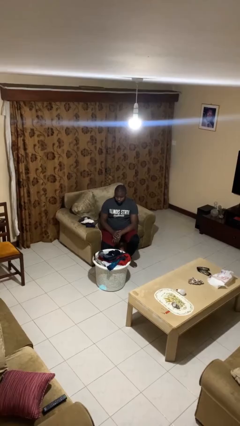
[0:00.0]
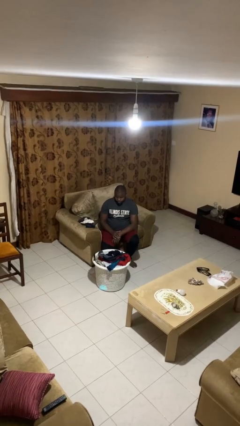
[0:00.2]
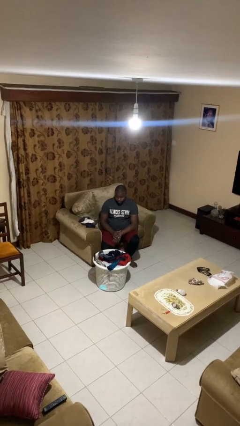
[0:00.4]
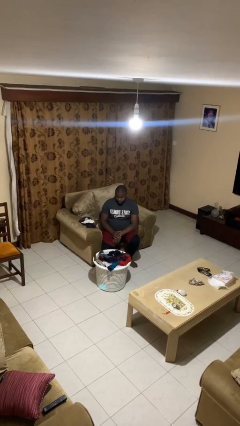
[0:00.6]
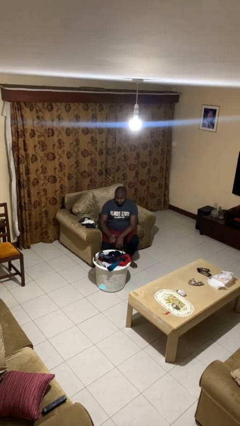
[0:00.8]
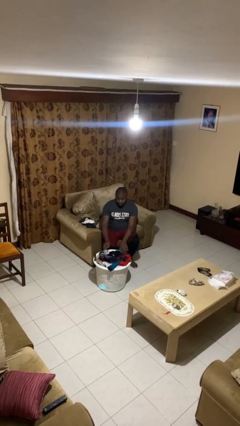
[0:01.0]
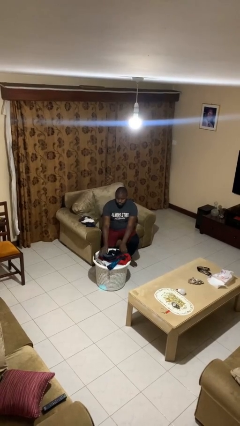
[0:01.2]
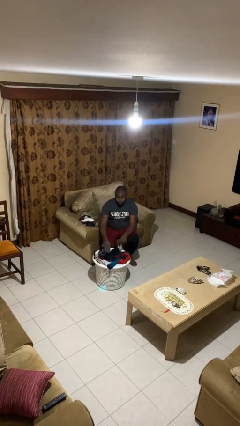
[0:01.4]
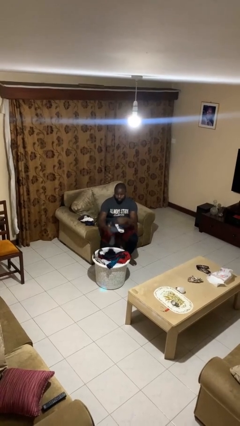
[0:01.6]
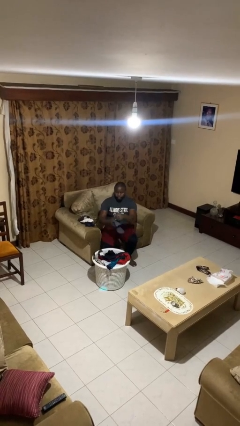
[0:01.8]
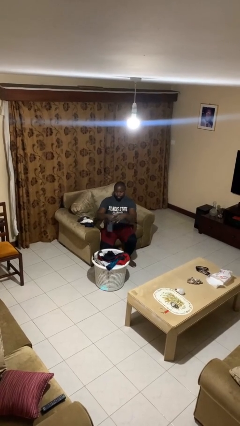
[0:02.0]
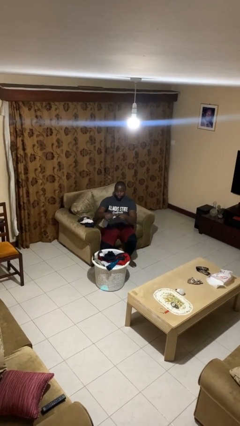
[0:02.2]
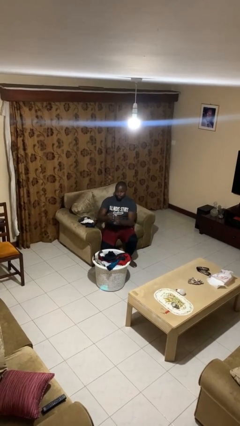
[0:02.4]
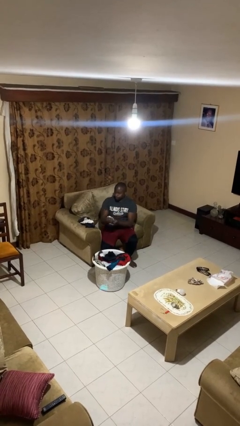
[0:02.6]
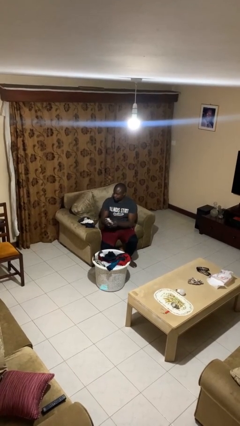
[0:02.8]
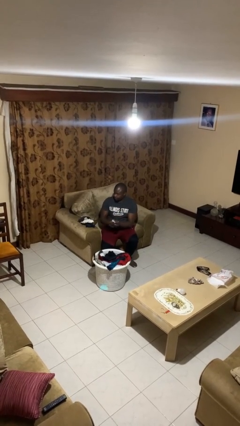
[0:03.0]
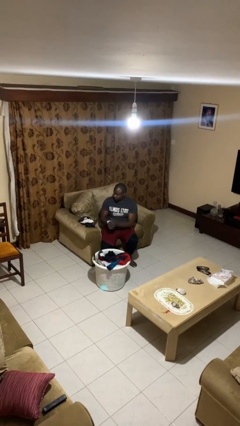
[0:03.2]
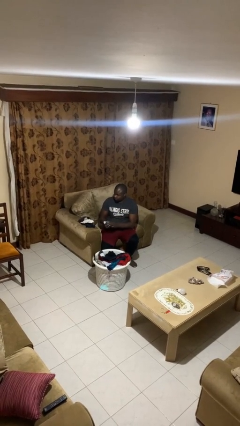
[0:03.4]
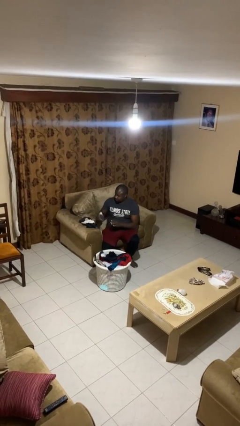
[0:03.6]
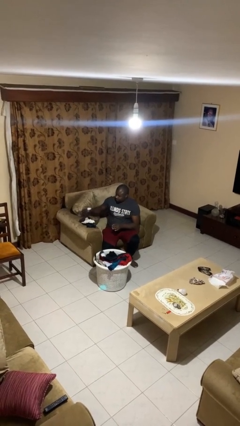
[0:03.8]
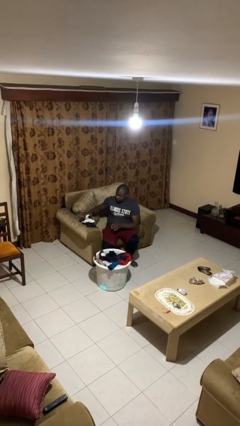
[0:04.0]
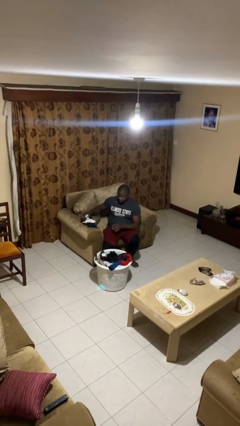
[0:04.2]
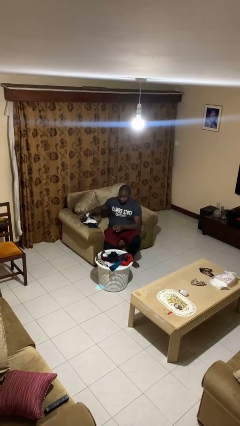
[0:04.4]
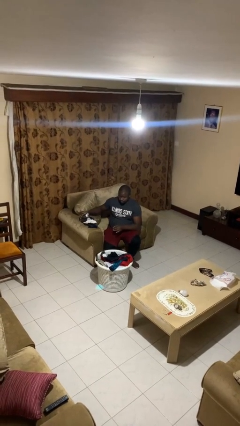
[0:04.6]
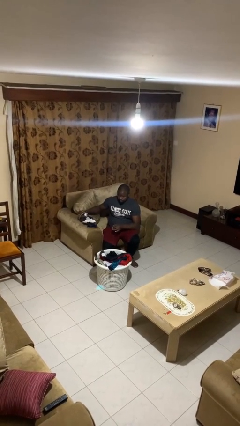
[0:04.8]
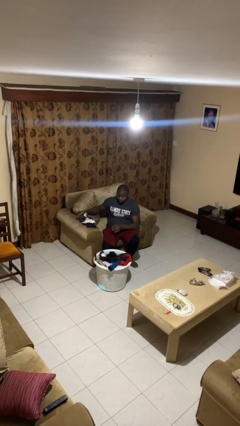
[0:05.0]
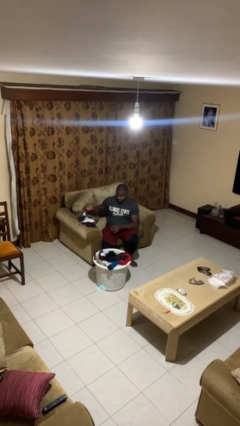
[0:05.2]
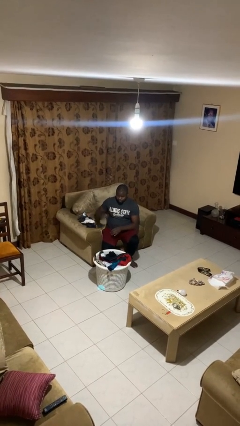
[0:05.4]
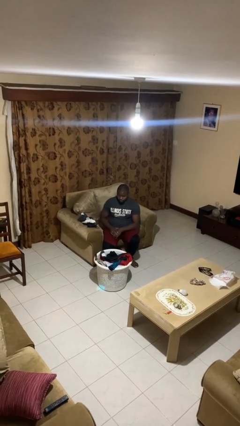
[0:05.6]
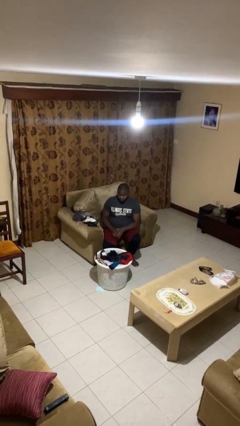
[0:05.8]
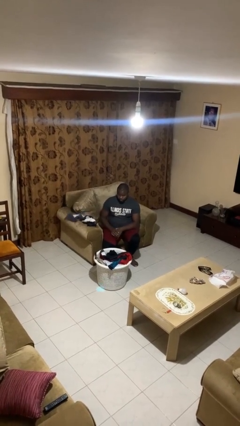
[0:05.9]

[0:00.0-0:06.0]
person folds socks

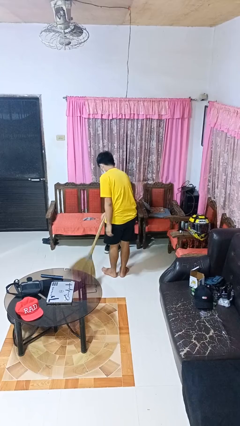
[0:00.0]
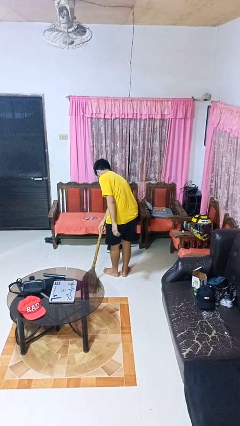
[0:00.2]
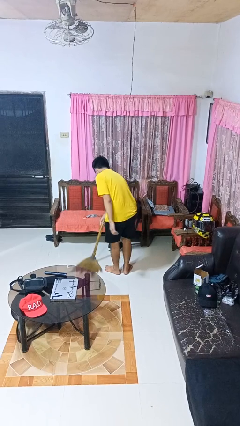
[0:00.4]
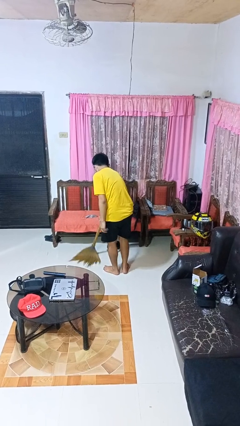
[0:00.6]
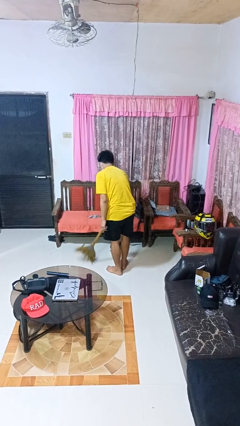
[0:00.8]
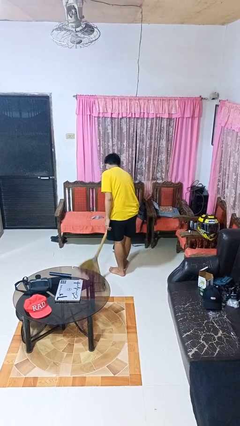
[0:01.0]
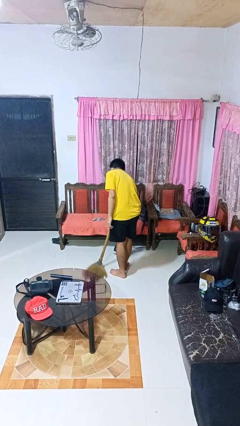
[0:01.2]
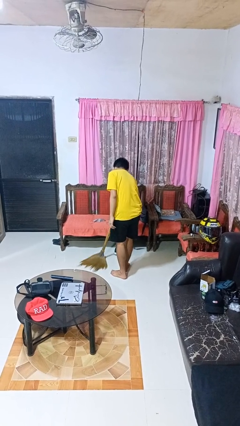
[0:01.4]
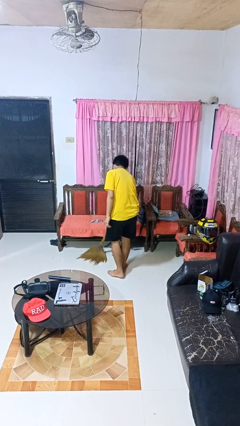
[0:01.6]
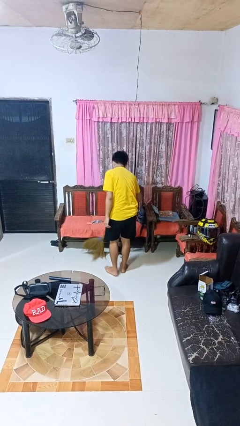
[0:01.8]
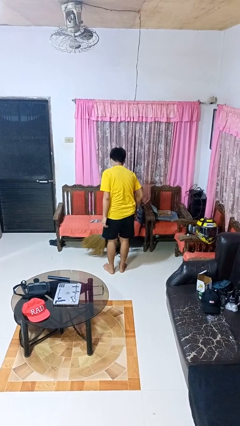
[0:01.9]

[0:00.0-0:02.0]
person sweeps floor

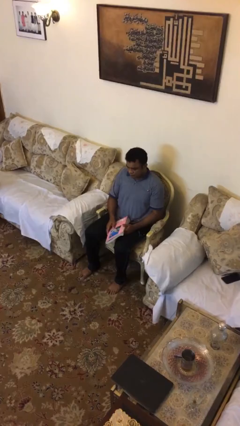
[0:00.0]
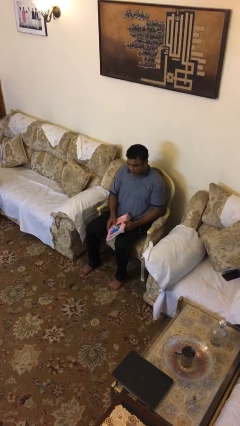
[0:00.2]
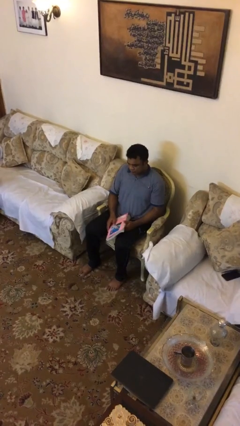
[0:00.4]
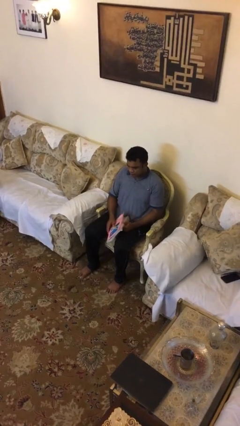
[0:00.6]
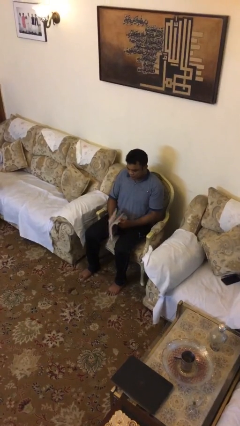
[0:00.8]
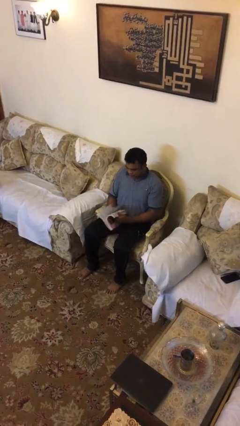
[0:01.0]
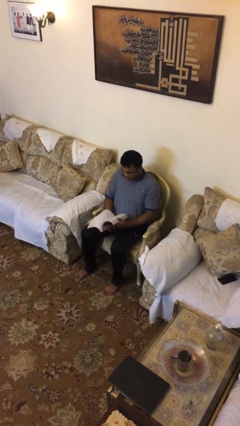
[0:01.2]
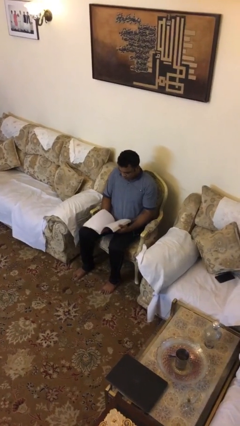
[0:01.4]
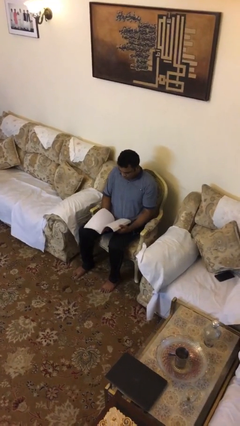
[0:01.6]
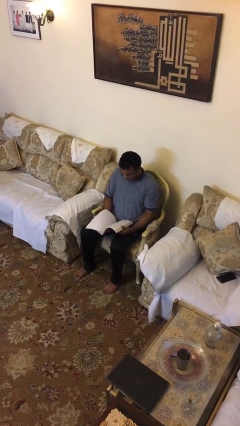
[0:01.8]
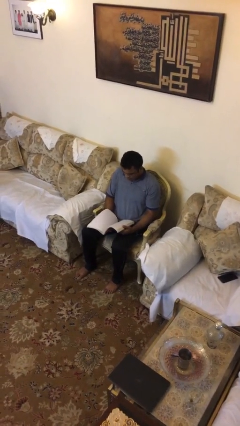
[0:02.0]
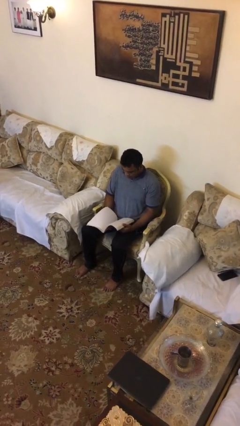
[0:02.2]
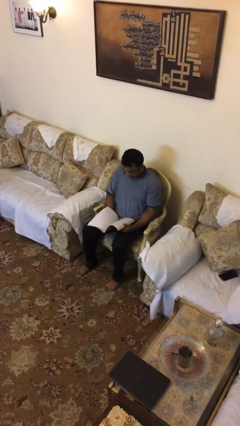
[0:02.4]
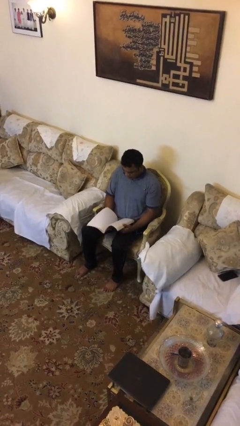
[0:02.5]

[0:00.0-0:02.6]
person reads document

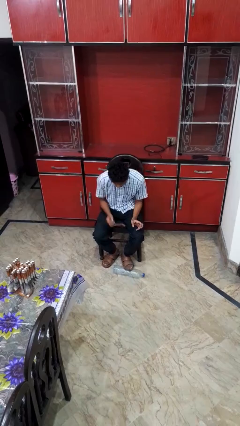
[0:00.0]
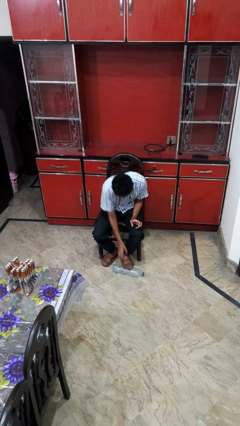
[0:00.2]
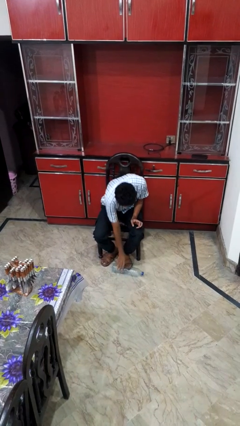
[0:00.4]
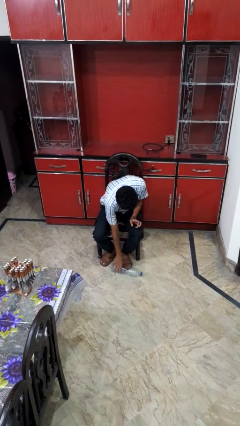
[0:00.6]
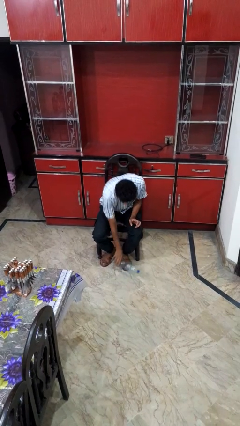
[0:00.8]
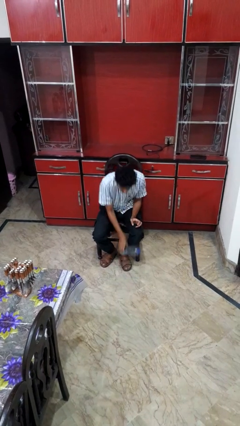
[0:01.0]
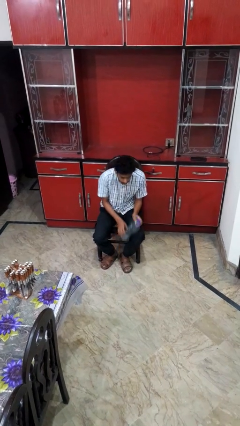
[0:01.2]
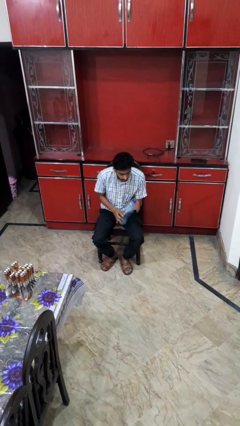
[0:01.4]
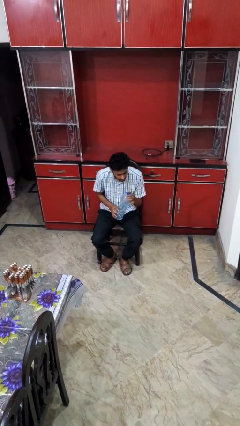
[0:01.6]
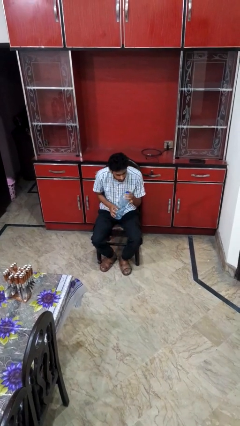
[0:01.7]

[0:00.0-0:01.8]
person picks up object from floor

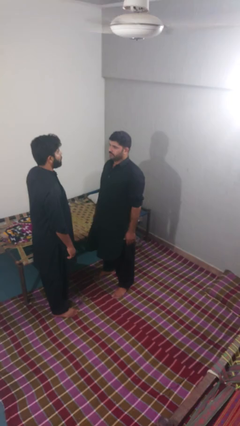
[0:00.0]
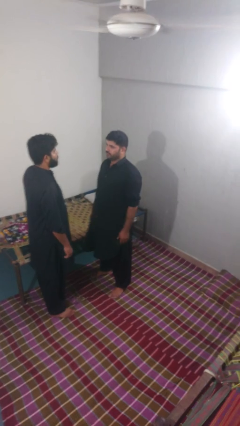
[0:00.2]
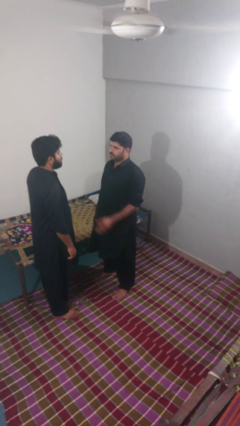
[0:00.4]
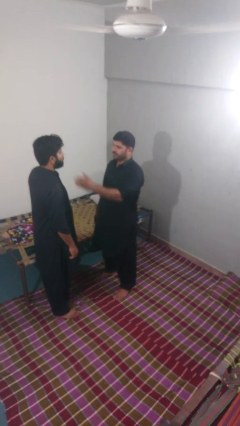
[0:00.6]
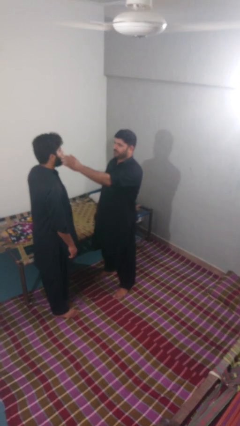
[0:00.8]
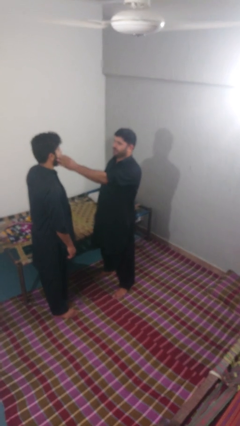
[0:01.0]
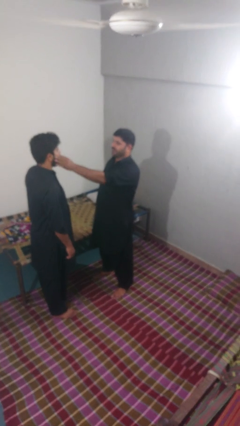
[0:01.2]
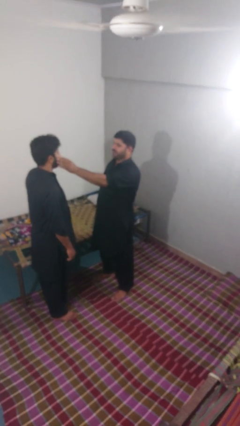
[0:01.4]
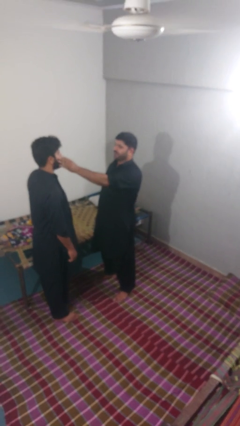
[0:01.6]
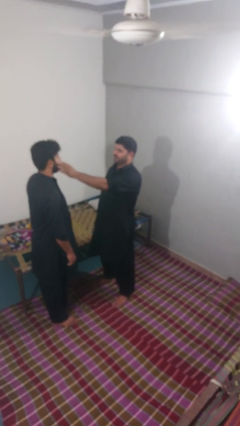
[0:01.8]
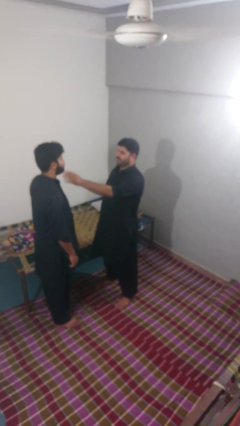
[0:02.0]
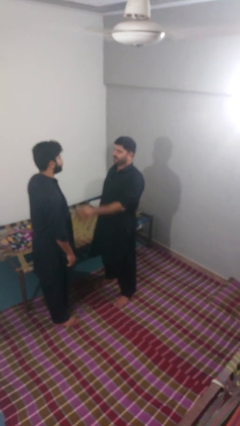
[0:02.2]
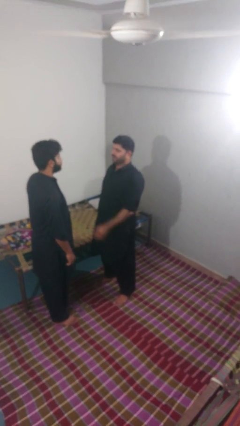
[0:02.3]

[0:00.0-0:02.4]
person touches face of person

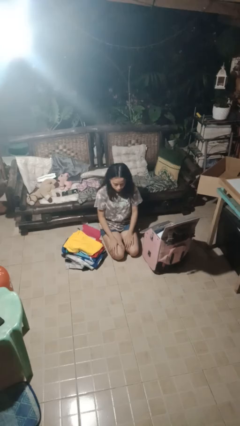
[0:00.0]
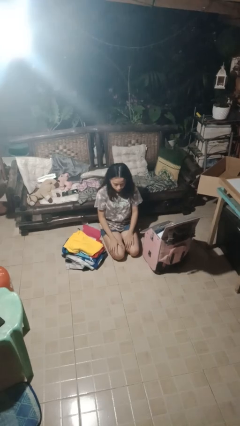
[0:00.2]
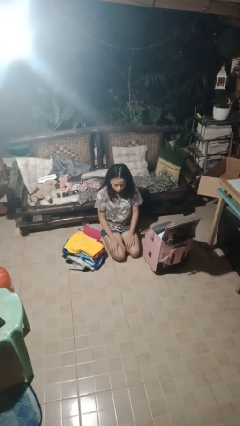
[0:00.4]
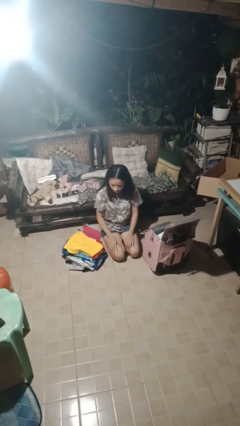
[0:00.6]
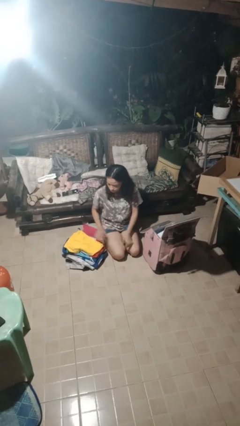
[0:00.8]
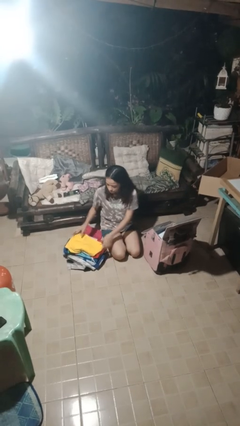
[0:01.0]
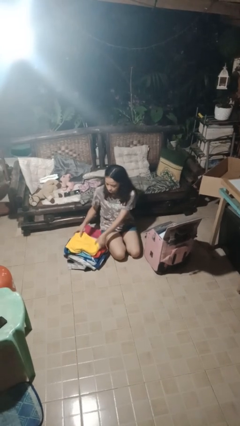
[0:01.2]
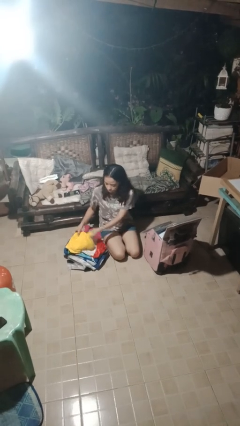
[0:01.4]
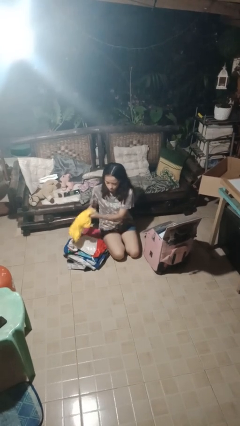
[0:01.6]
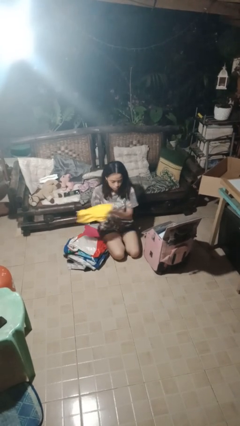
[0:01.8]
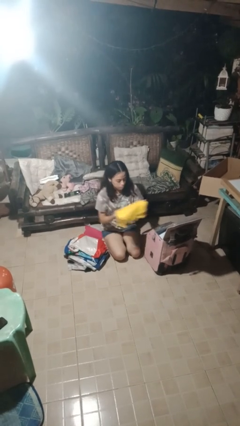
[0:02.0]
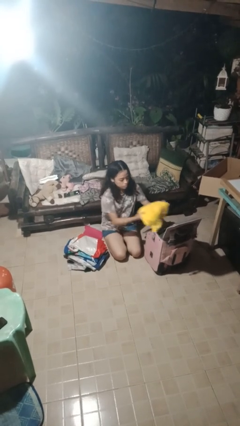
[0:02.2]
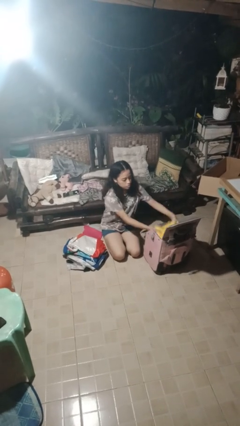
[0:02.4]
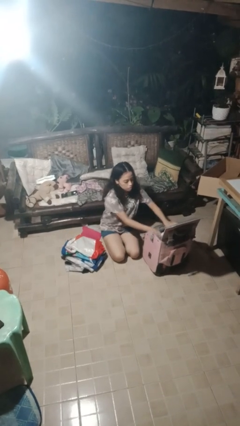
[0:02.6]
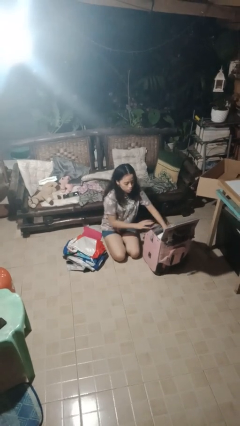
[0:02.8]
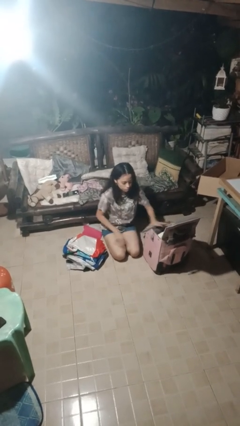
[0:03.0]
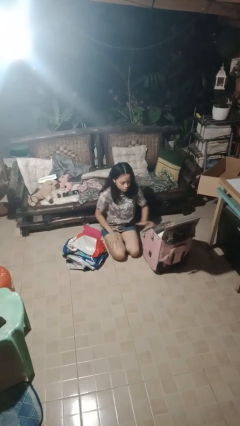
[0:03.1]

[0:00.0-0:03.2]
person loads clothes into suitcase
